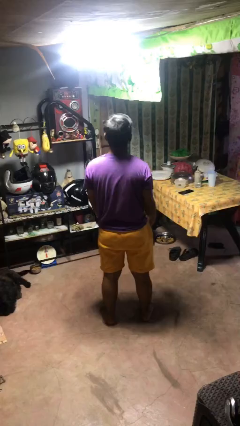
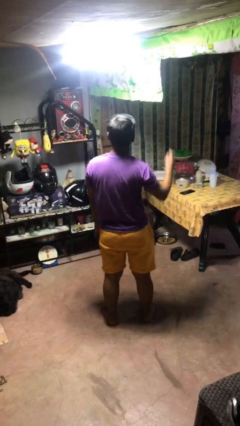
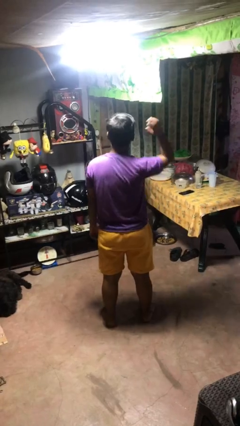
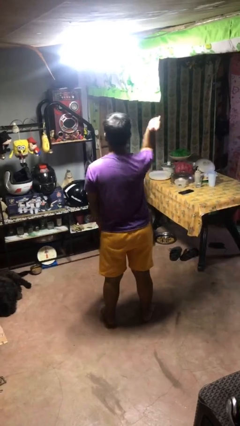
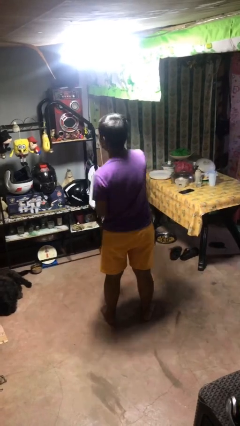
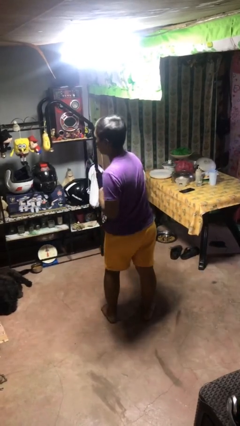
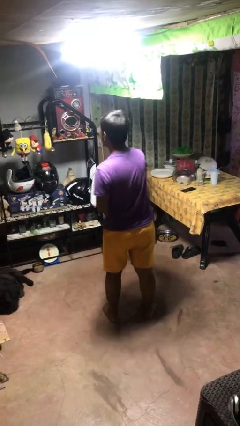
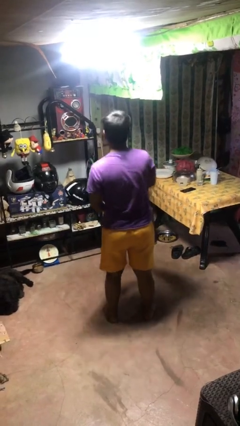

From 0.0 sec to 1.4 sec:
person karate chop

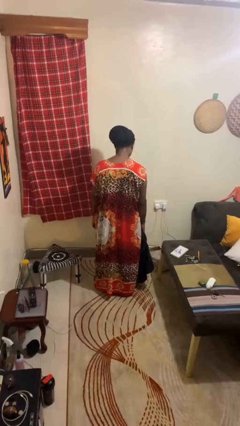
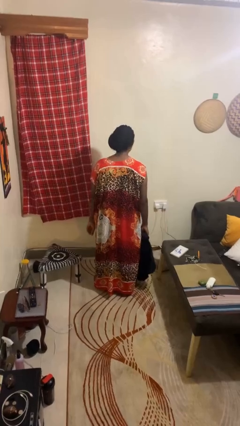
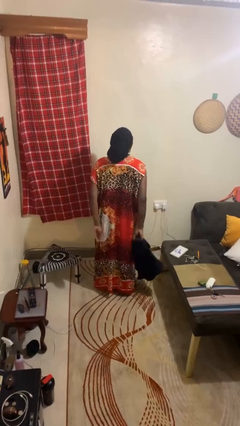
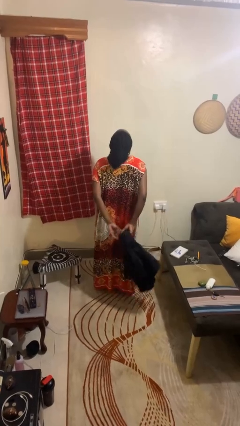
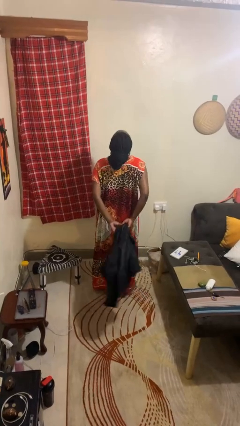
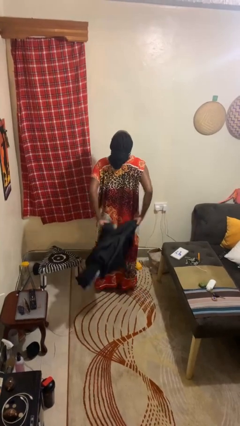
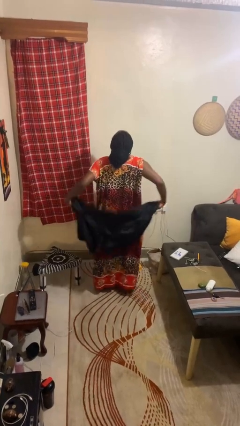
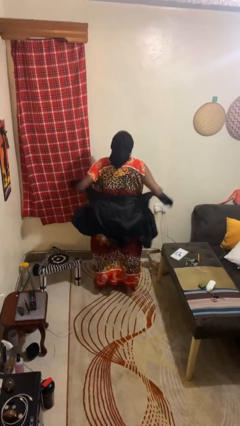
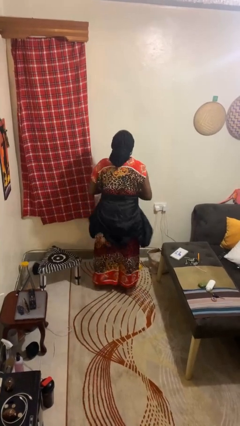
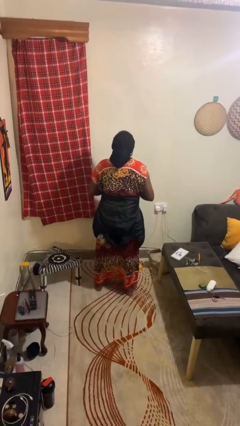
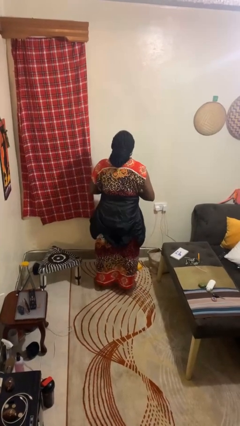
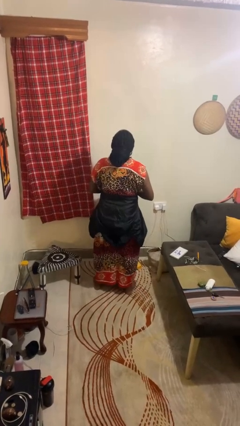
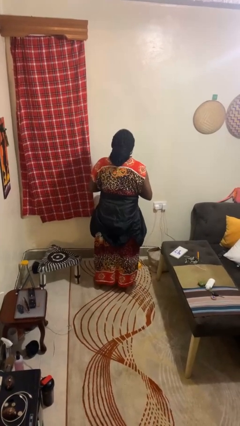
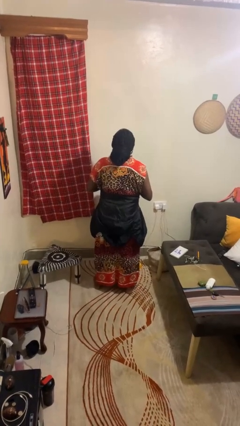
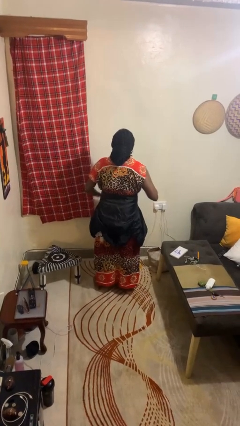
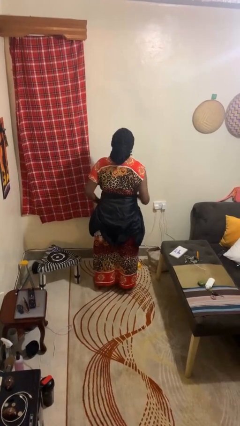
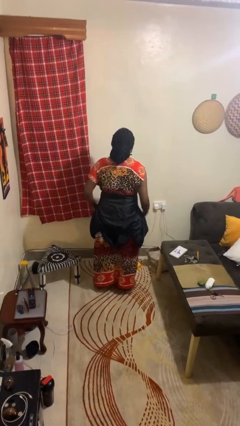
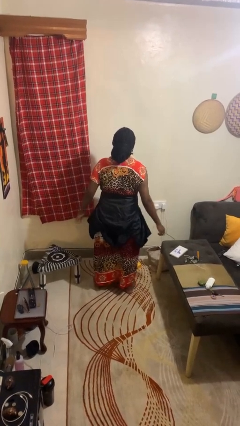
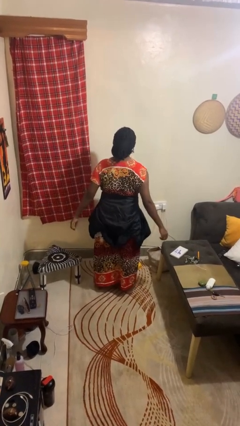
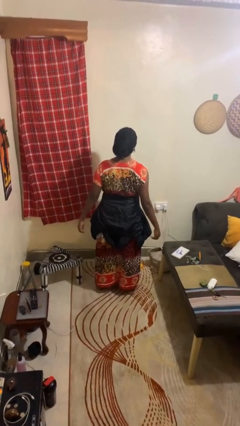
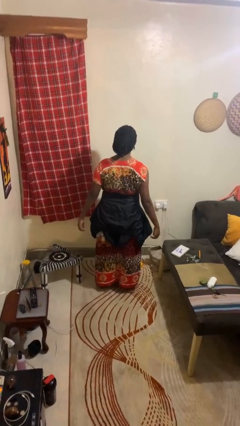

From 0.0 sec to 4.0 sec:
person ties jacket around waist

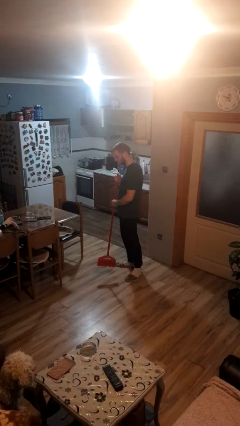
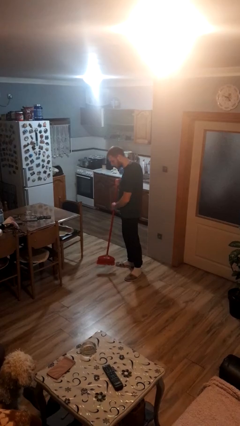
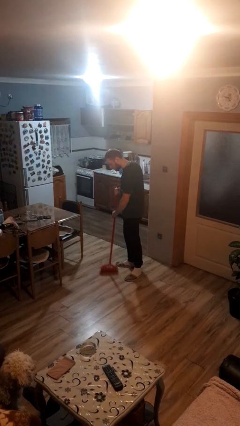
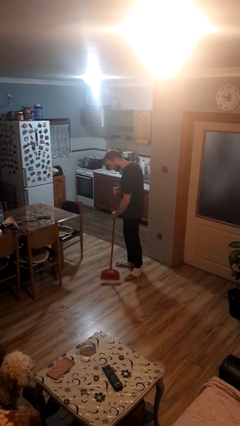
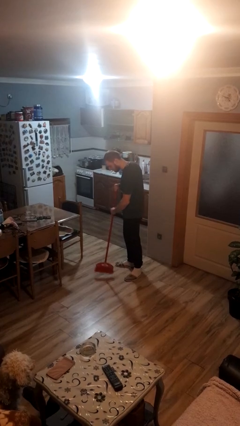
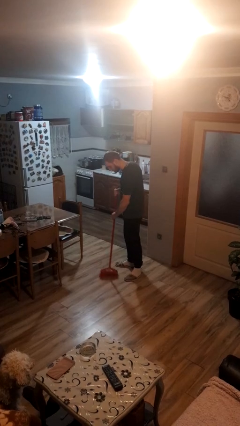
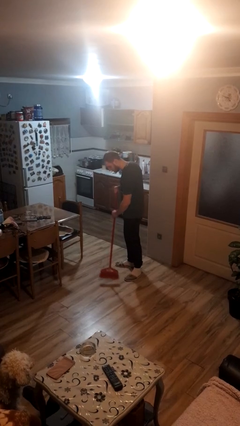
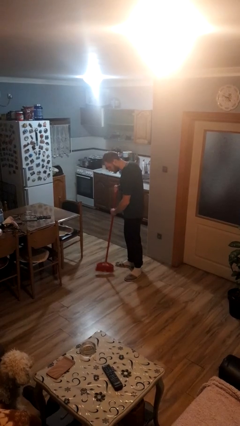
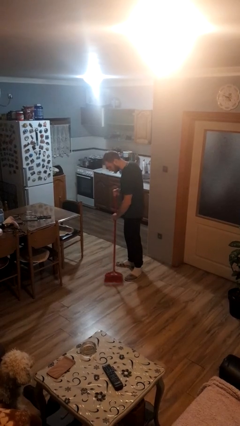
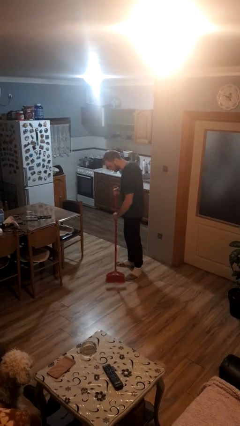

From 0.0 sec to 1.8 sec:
person sweeps floor

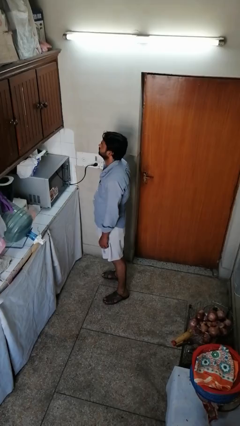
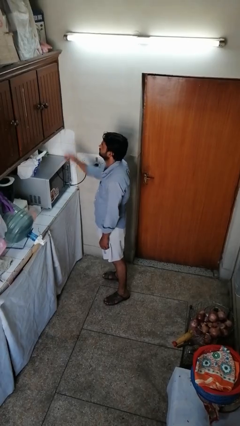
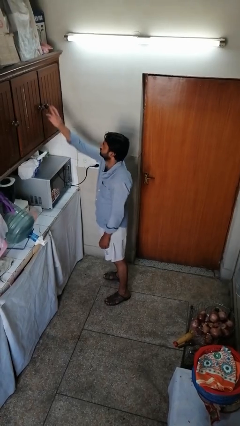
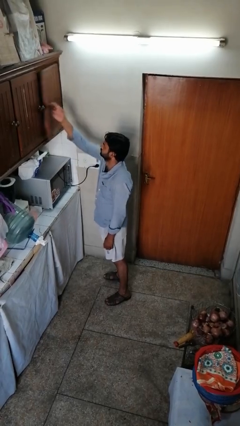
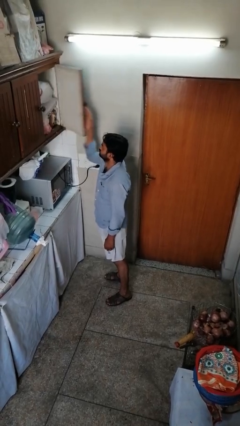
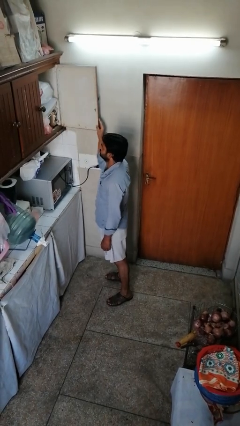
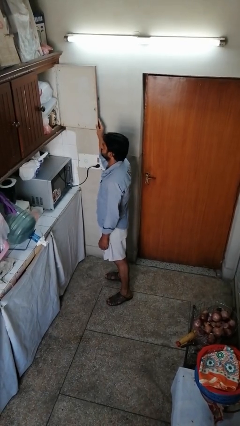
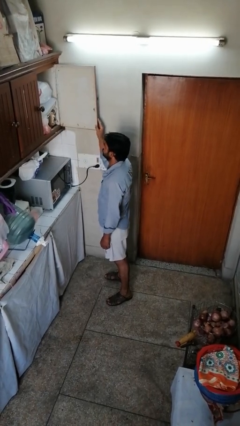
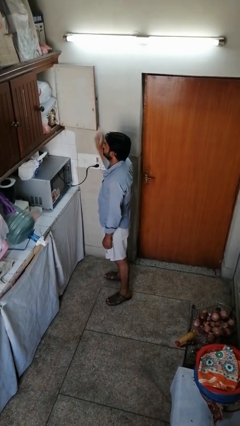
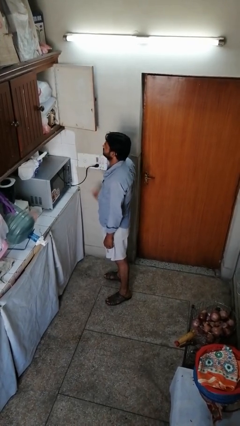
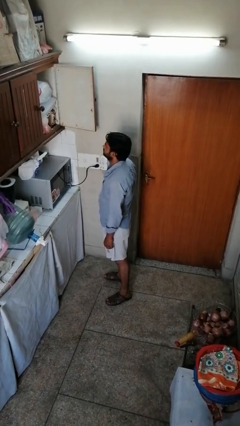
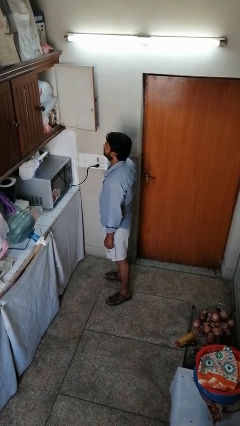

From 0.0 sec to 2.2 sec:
person opens cabinet

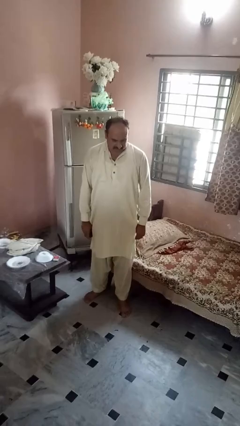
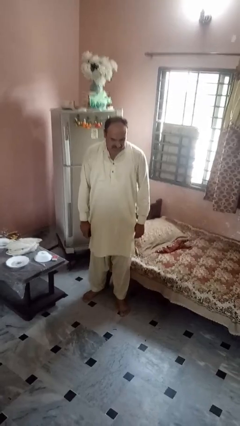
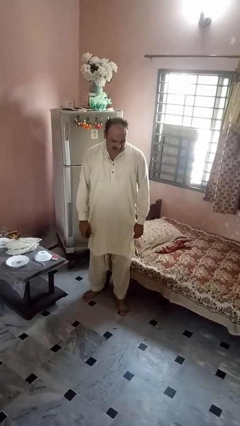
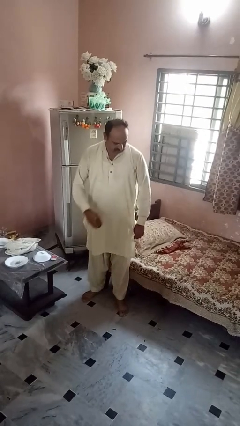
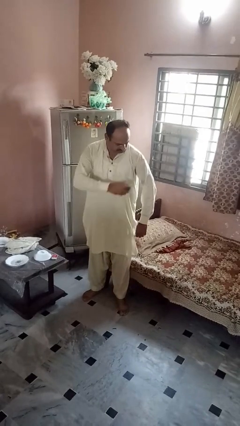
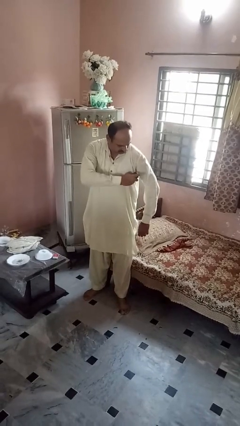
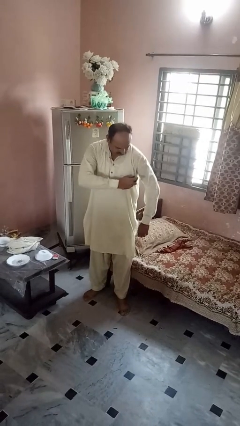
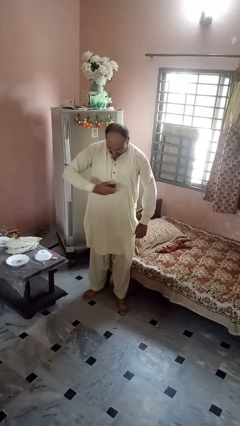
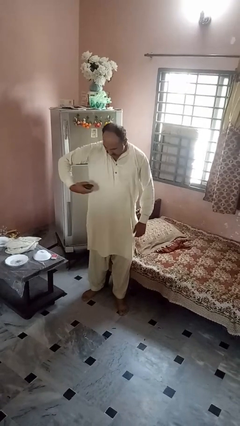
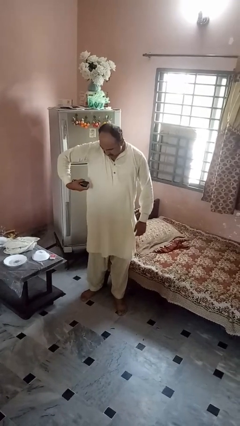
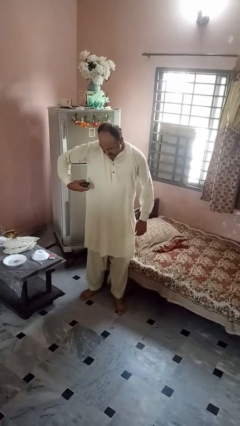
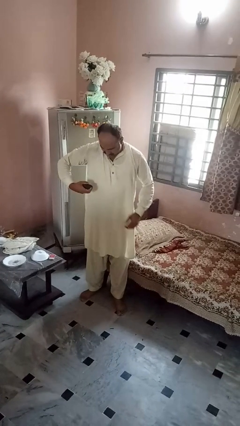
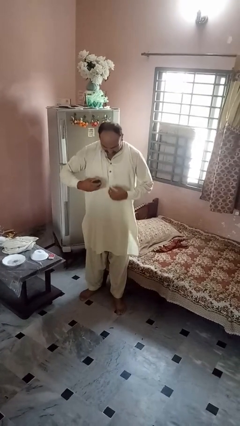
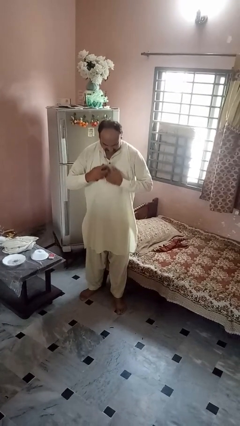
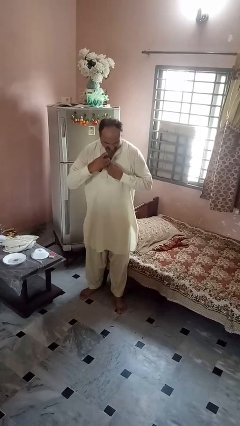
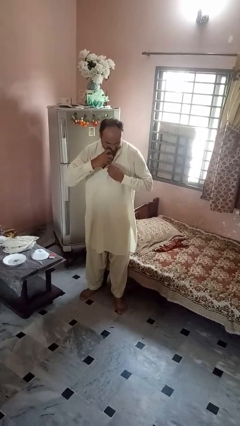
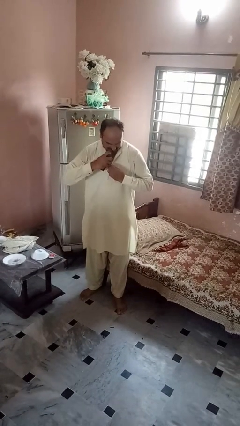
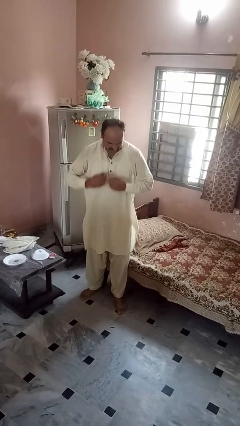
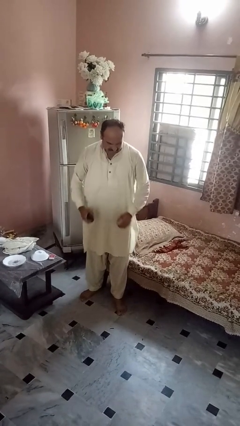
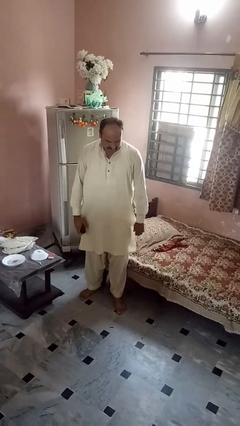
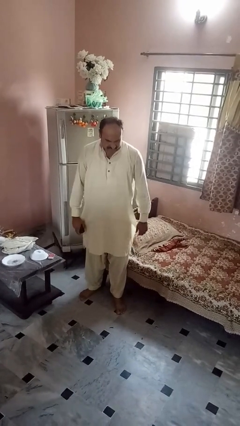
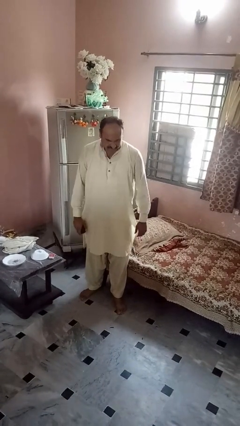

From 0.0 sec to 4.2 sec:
person applies deodorant

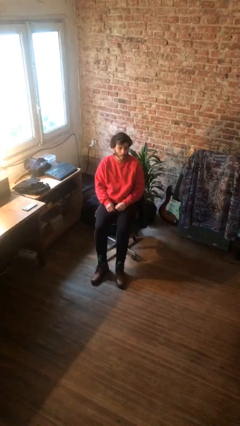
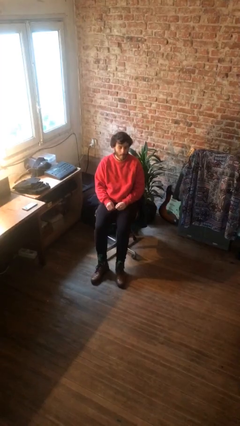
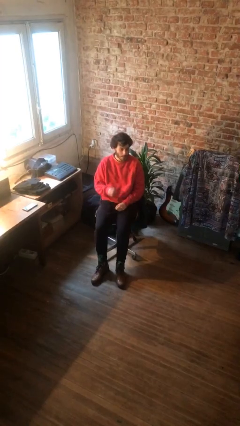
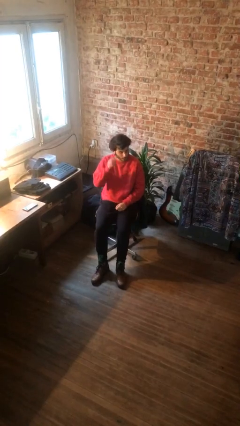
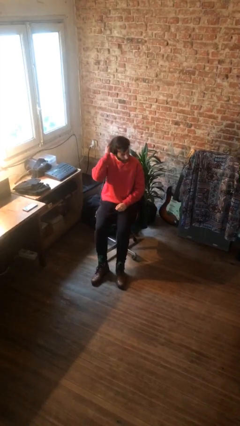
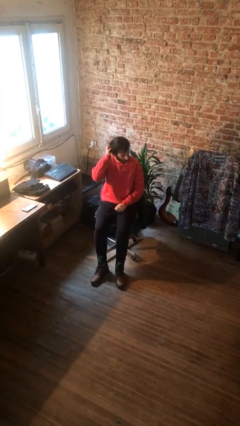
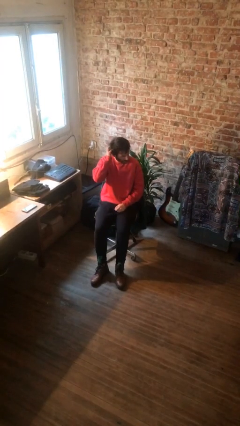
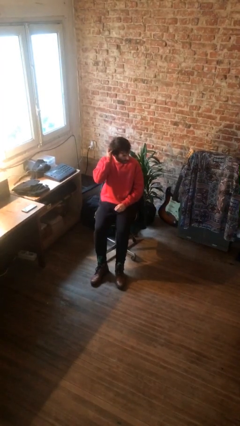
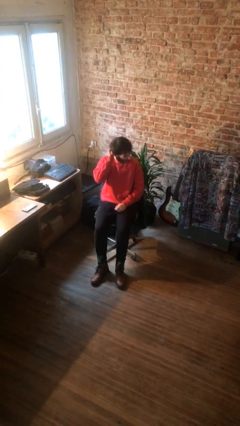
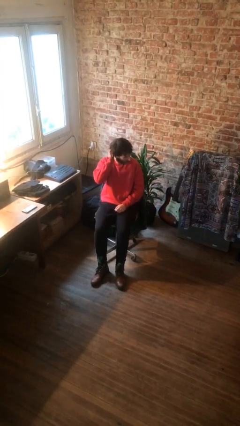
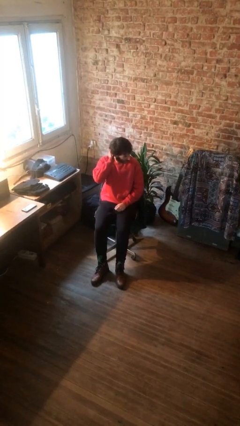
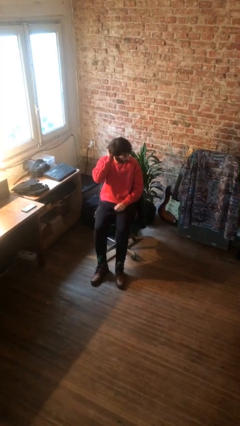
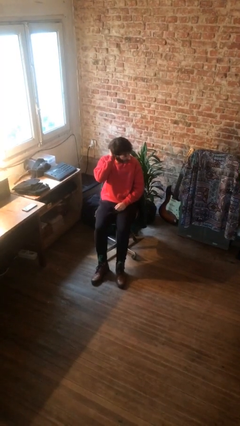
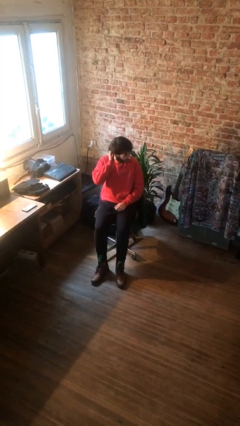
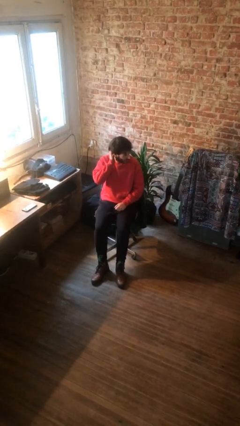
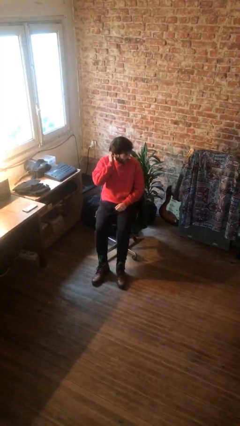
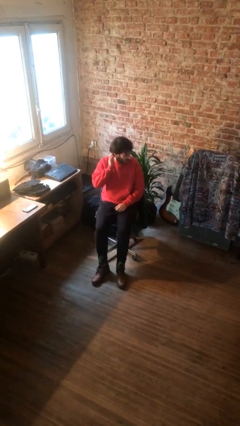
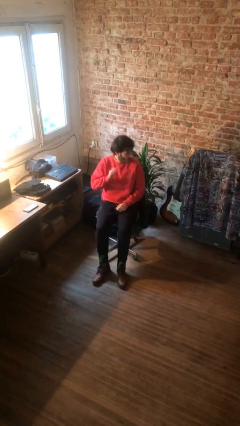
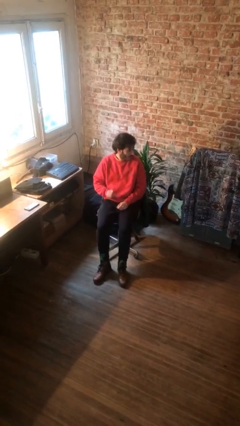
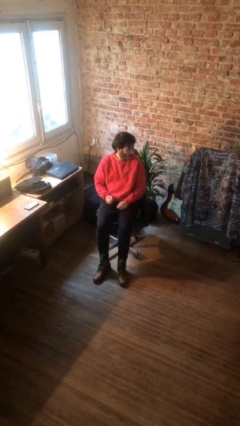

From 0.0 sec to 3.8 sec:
person scratches face
